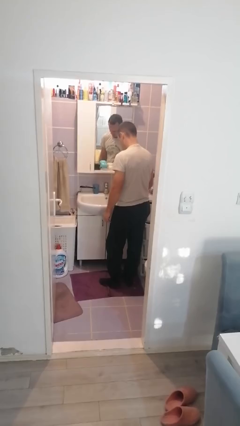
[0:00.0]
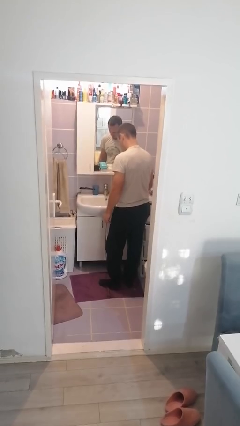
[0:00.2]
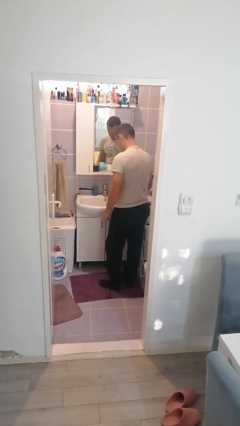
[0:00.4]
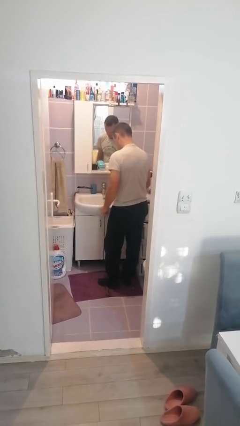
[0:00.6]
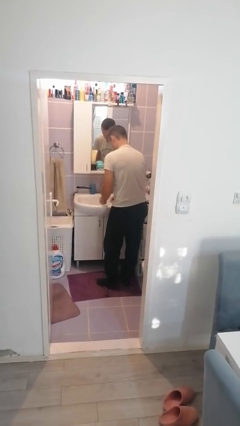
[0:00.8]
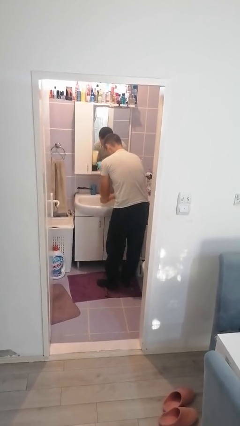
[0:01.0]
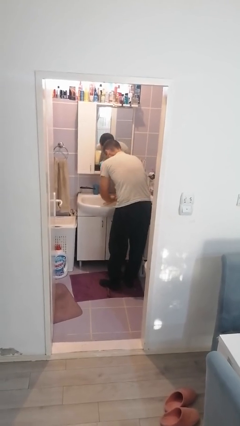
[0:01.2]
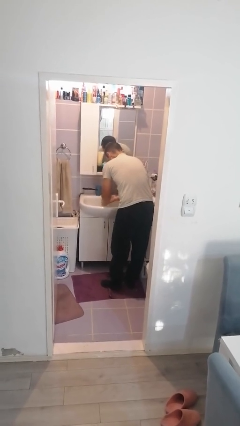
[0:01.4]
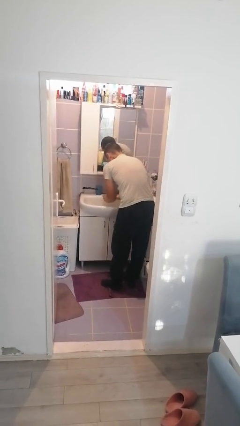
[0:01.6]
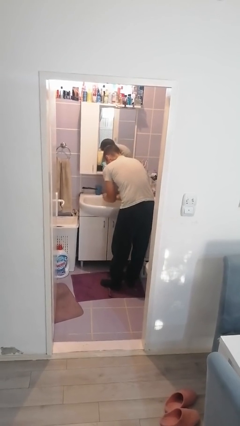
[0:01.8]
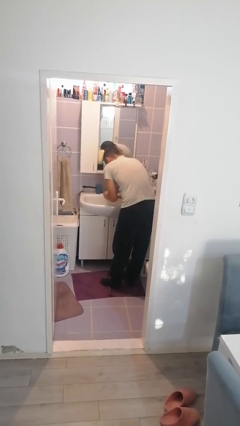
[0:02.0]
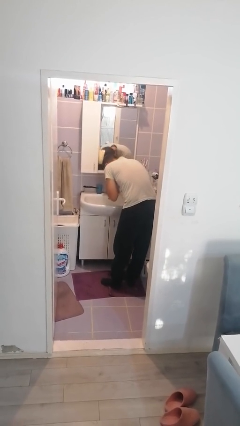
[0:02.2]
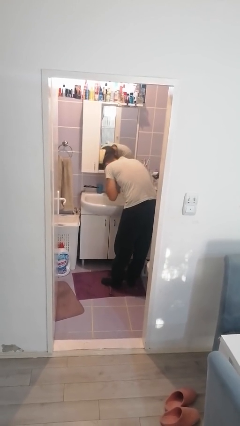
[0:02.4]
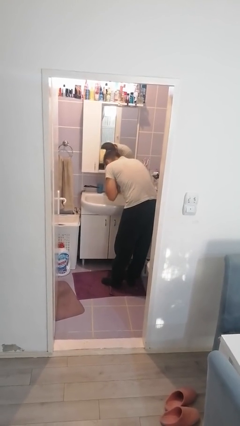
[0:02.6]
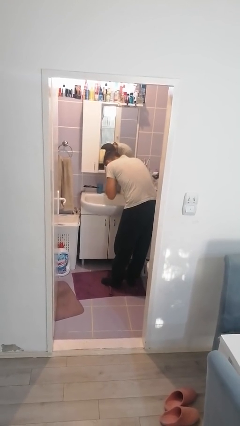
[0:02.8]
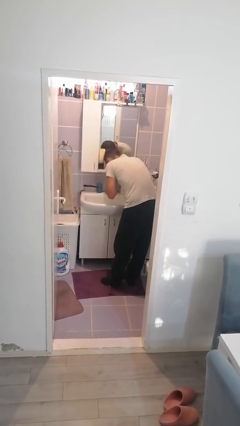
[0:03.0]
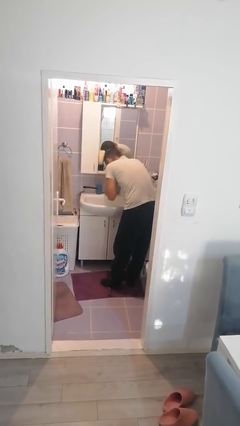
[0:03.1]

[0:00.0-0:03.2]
person washes face

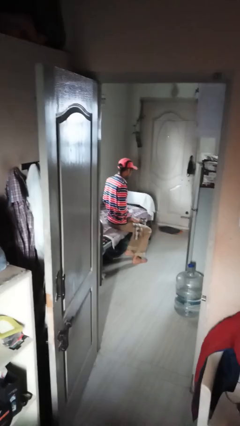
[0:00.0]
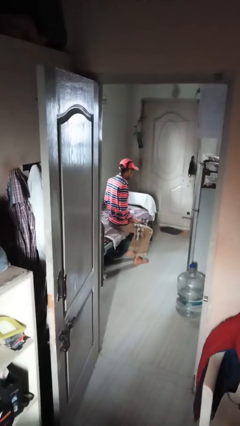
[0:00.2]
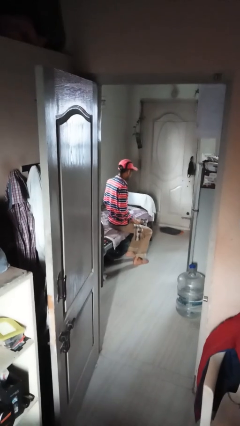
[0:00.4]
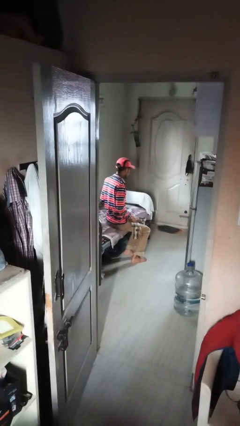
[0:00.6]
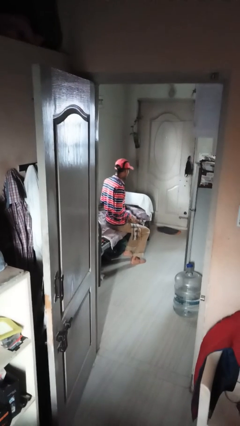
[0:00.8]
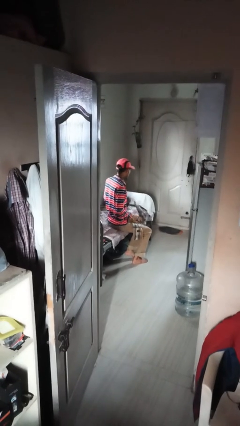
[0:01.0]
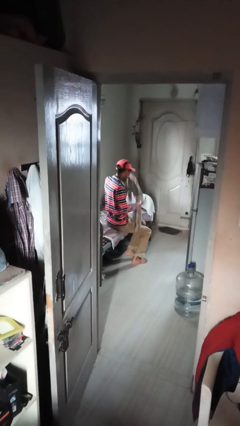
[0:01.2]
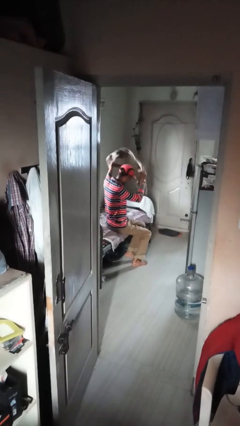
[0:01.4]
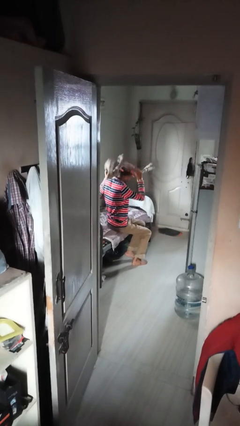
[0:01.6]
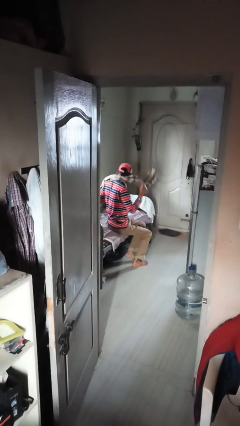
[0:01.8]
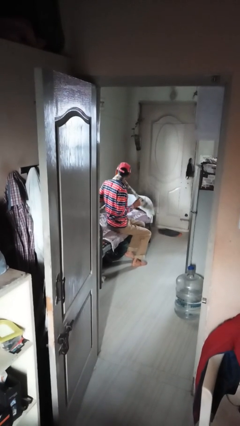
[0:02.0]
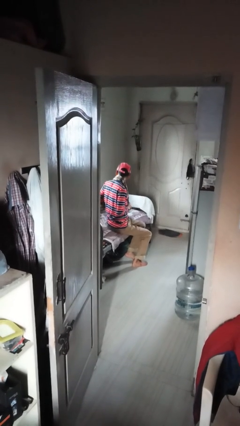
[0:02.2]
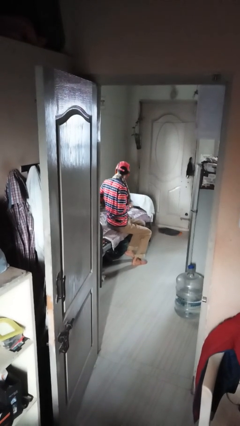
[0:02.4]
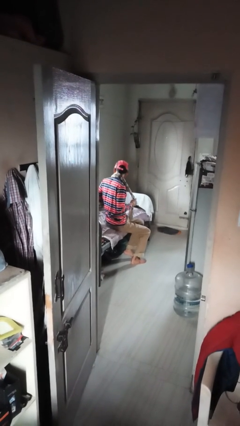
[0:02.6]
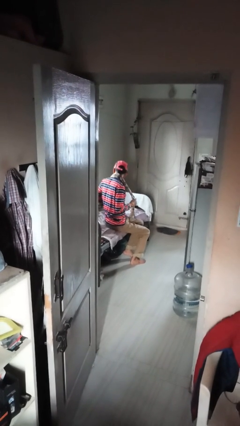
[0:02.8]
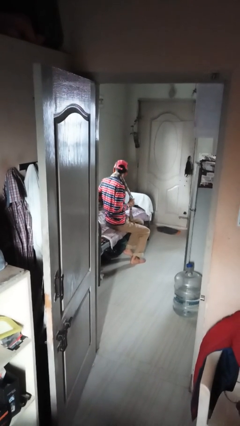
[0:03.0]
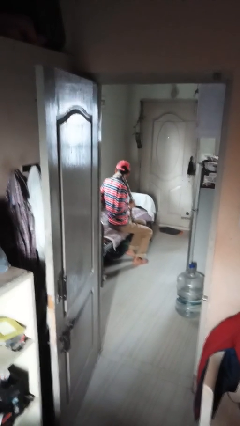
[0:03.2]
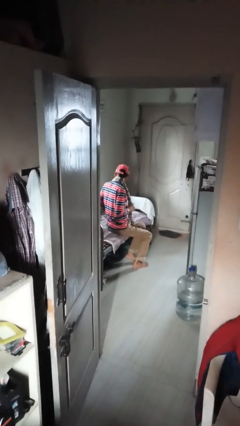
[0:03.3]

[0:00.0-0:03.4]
person puts on scarf

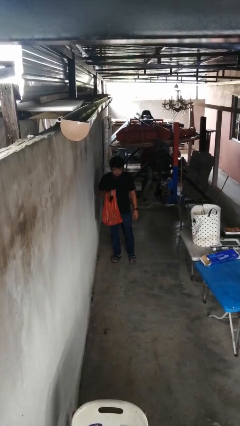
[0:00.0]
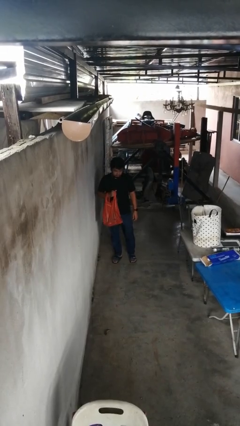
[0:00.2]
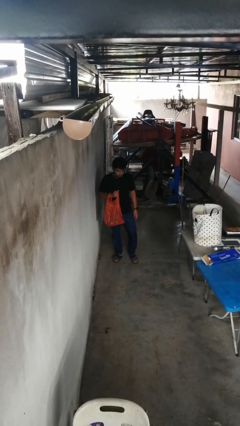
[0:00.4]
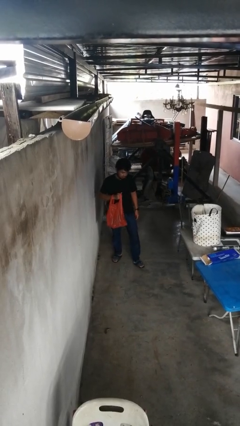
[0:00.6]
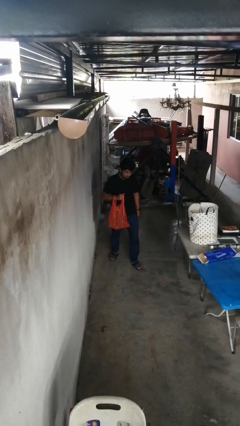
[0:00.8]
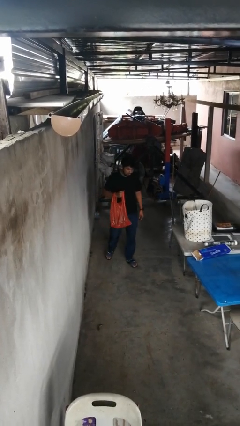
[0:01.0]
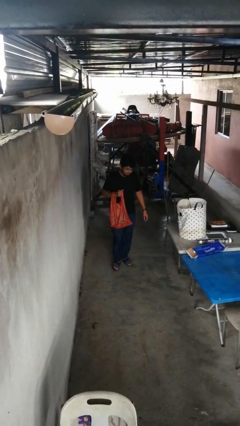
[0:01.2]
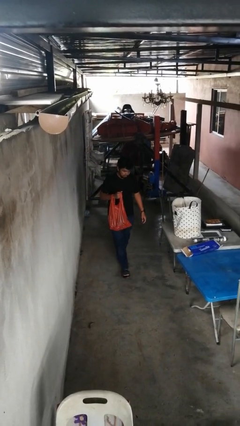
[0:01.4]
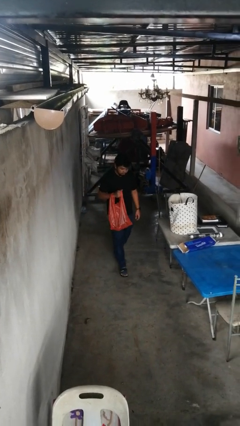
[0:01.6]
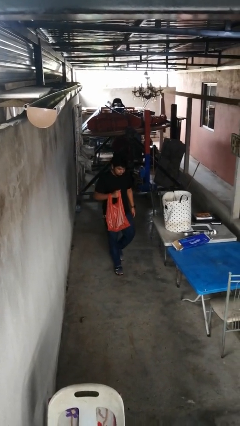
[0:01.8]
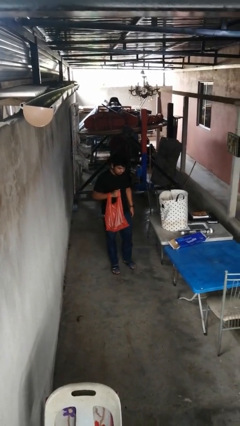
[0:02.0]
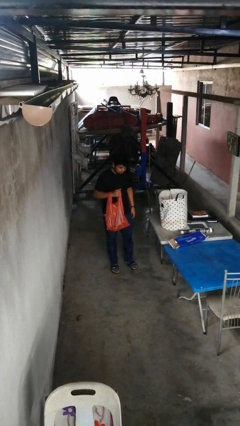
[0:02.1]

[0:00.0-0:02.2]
person carries groceries

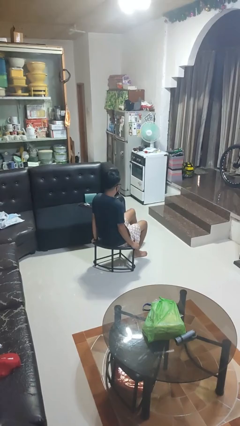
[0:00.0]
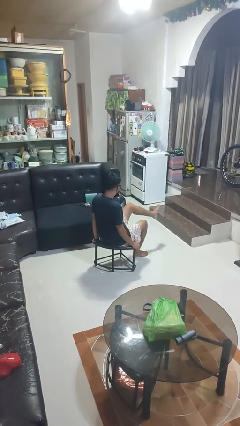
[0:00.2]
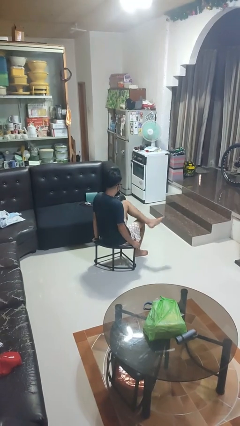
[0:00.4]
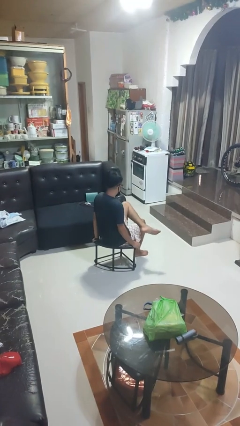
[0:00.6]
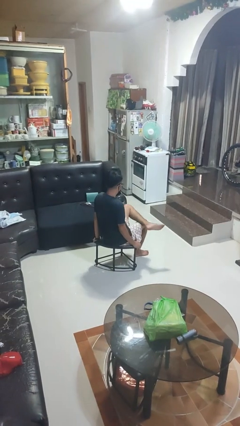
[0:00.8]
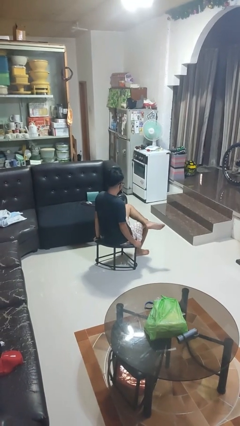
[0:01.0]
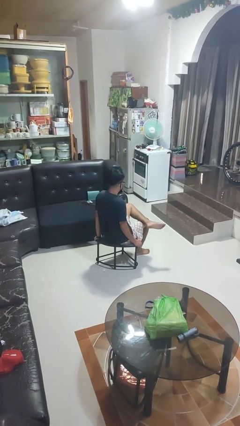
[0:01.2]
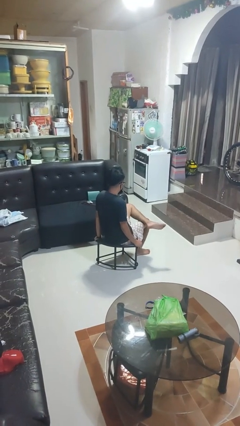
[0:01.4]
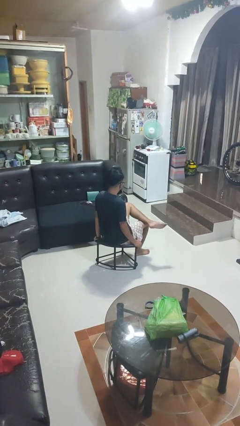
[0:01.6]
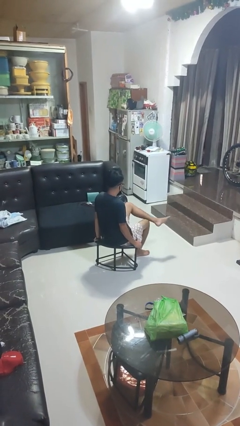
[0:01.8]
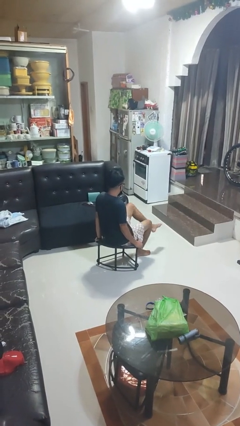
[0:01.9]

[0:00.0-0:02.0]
person crosses legs

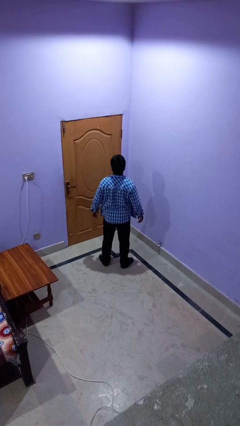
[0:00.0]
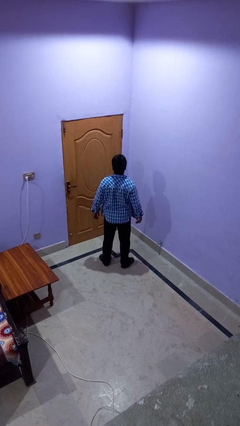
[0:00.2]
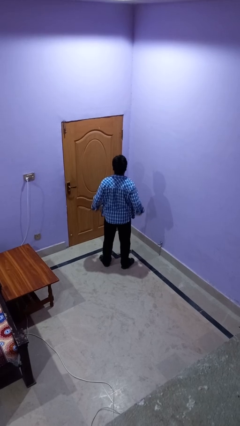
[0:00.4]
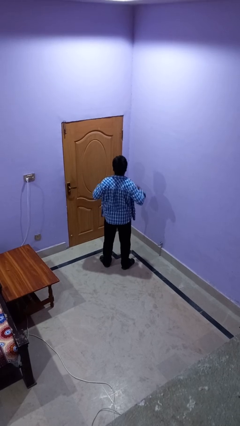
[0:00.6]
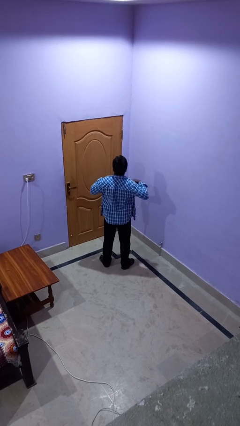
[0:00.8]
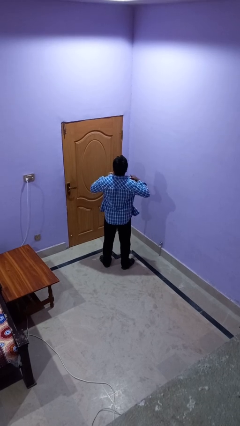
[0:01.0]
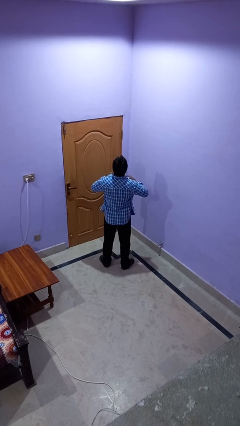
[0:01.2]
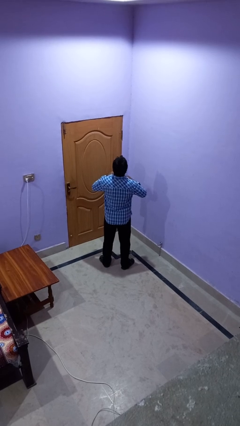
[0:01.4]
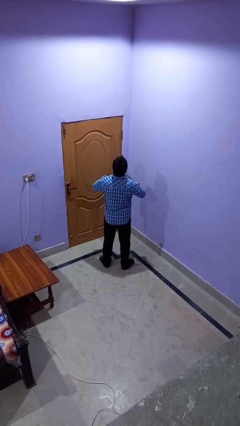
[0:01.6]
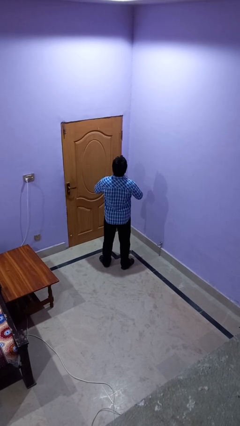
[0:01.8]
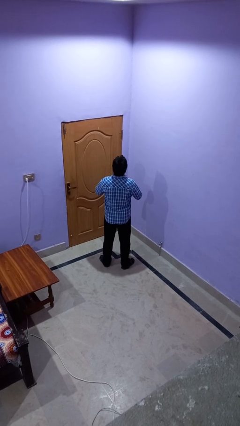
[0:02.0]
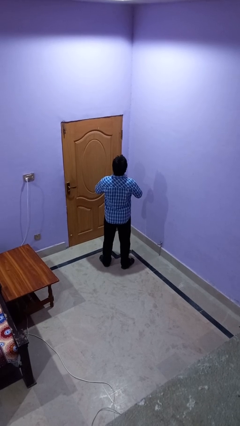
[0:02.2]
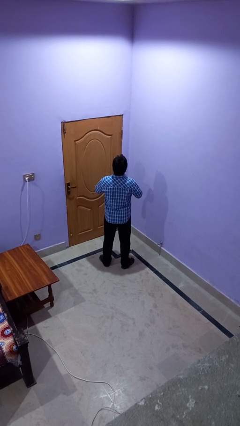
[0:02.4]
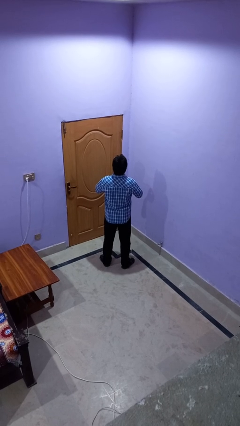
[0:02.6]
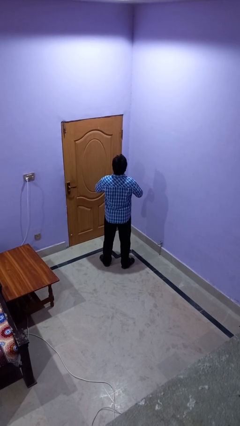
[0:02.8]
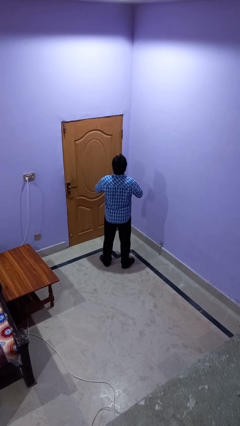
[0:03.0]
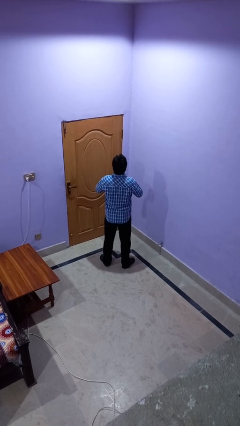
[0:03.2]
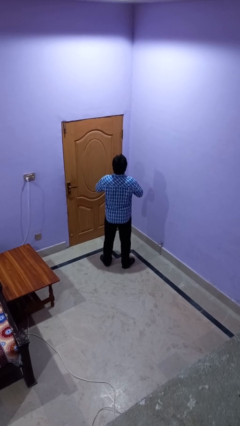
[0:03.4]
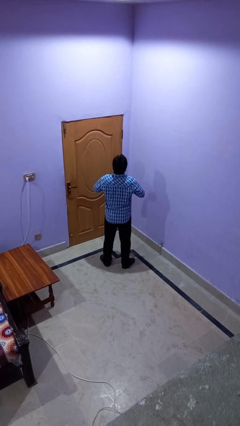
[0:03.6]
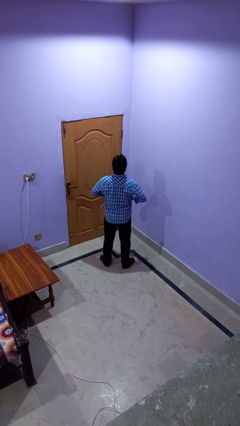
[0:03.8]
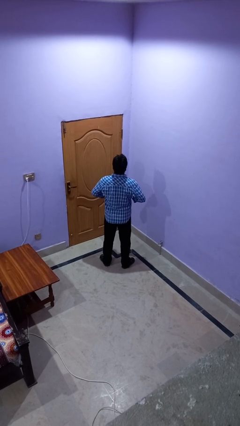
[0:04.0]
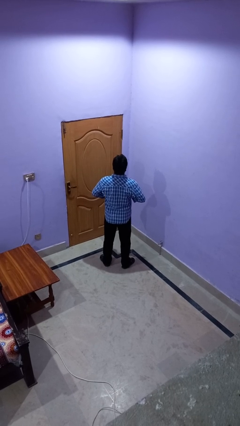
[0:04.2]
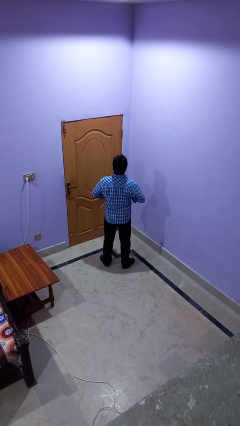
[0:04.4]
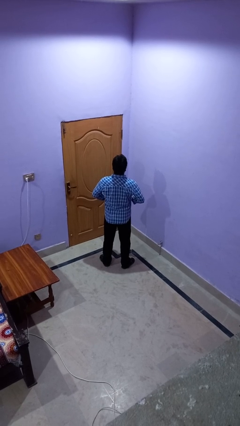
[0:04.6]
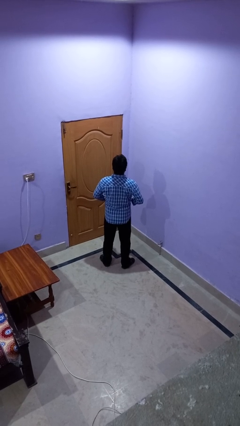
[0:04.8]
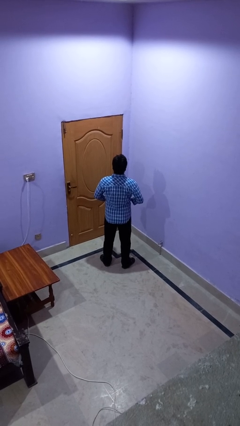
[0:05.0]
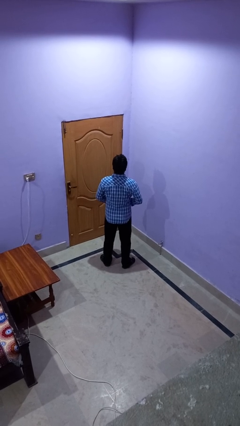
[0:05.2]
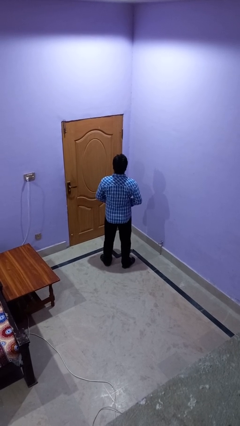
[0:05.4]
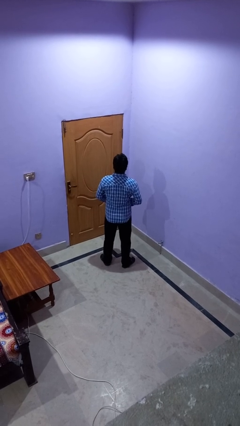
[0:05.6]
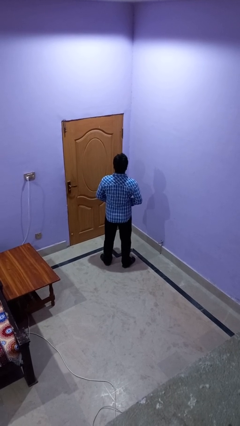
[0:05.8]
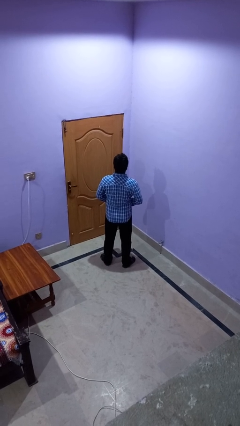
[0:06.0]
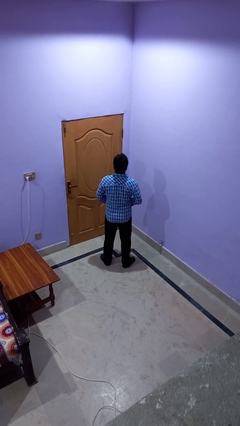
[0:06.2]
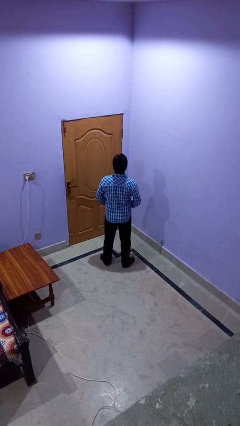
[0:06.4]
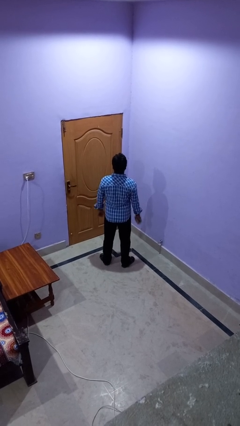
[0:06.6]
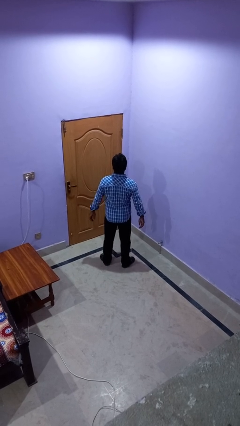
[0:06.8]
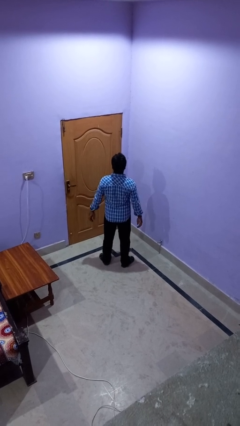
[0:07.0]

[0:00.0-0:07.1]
person buttons shirt
